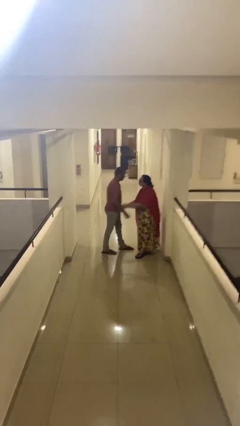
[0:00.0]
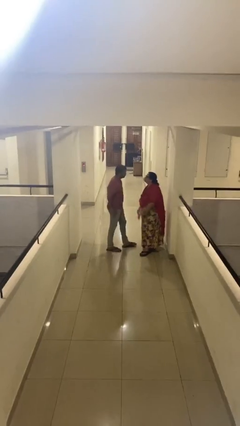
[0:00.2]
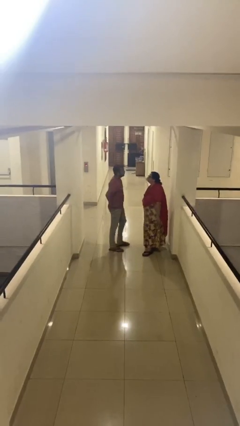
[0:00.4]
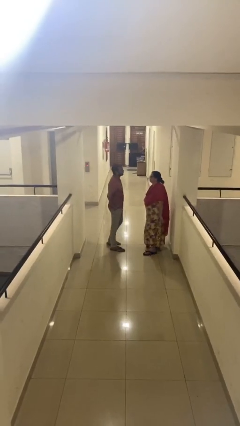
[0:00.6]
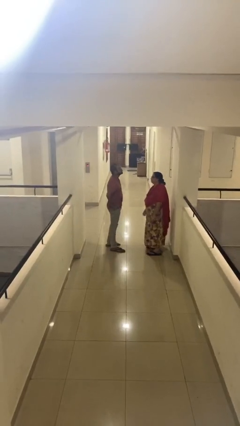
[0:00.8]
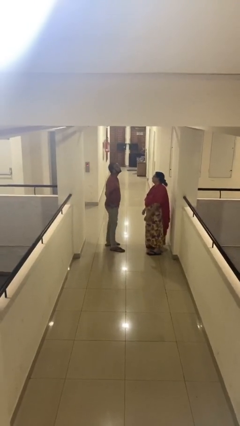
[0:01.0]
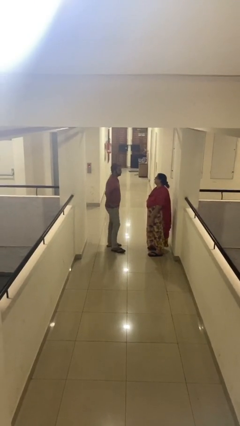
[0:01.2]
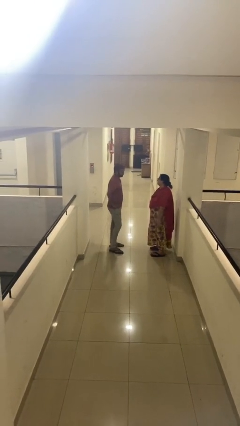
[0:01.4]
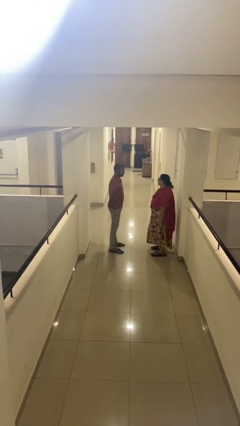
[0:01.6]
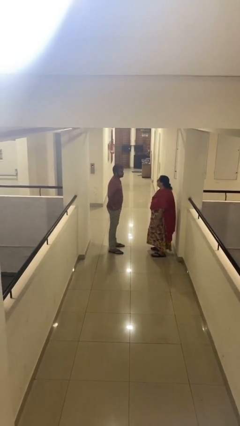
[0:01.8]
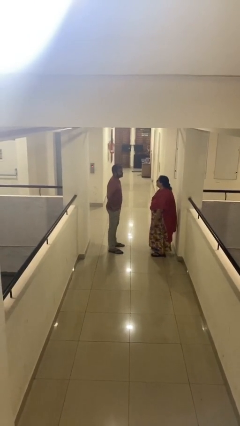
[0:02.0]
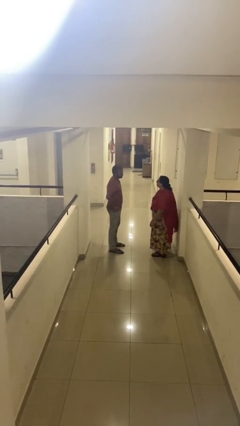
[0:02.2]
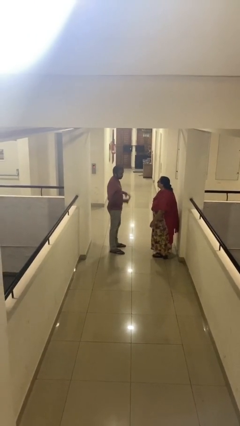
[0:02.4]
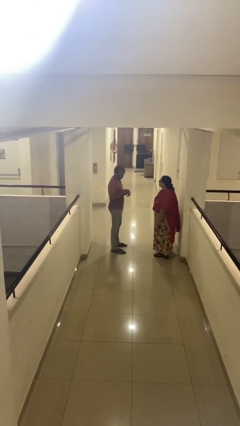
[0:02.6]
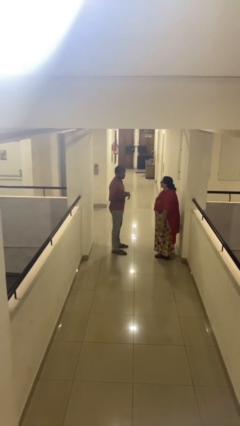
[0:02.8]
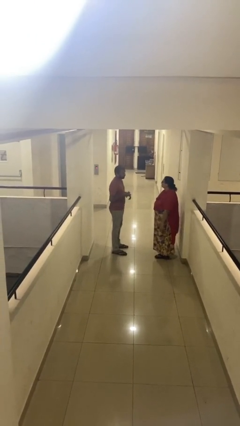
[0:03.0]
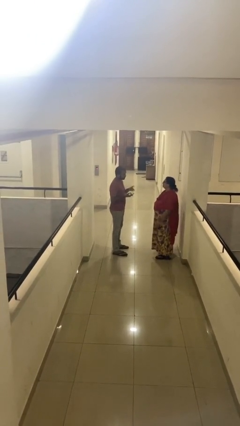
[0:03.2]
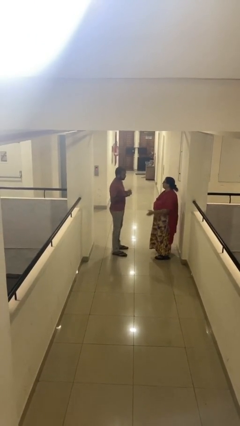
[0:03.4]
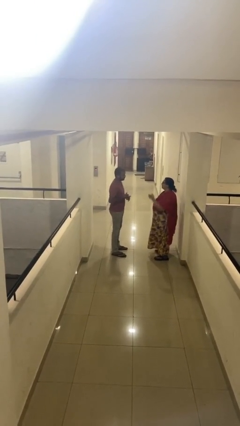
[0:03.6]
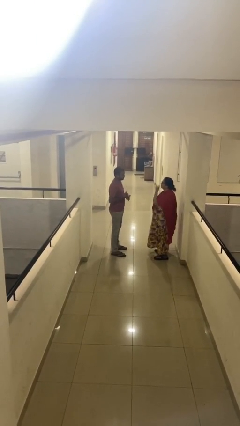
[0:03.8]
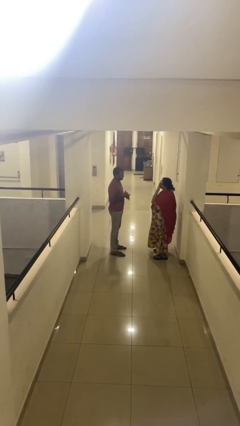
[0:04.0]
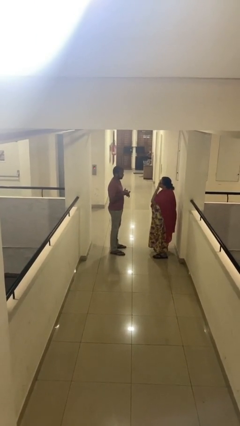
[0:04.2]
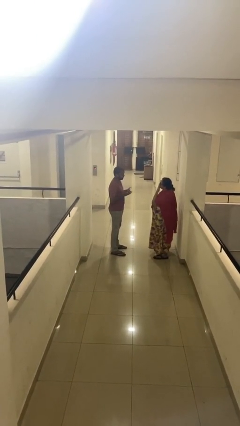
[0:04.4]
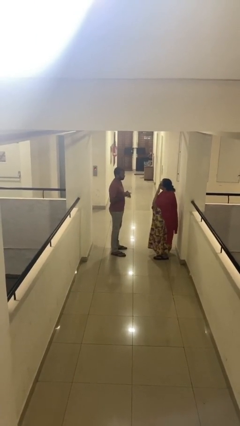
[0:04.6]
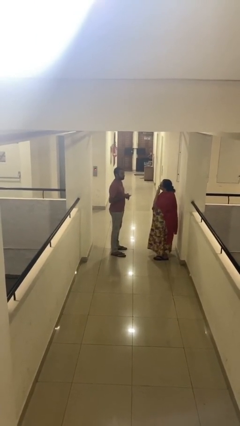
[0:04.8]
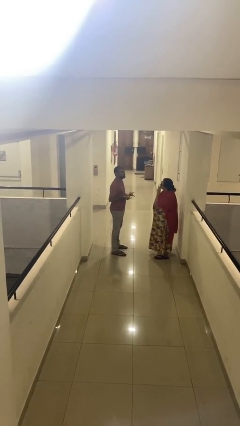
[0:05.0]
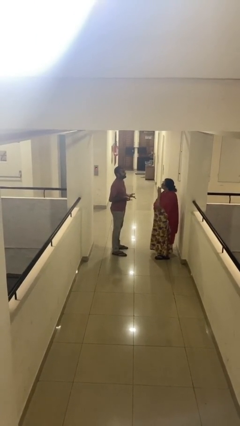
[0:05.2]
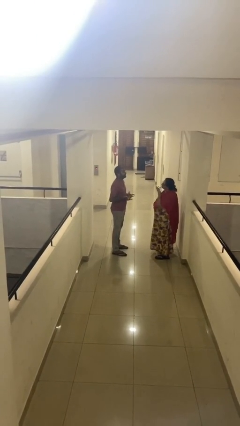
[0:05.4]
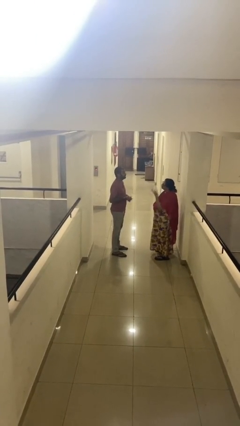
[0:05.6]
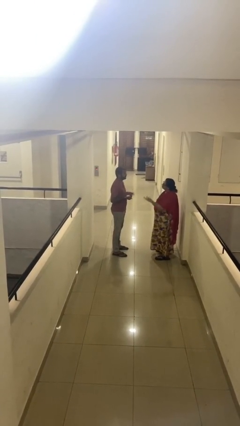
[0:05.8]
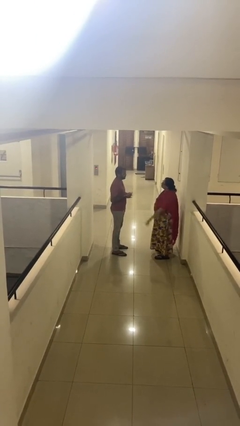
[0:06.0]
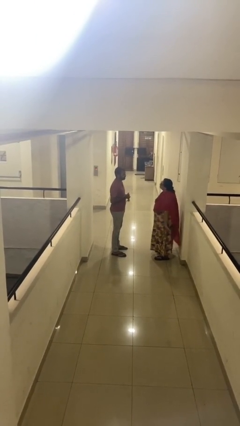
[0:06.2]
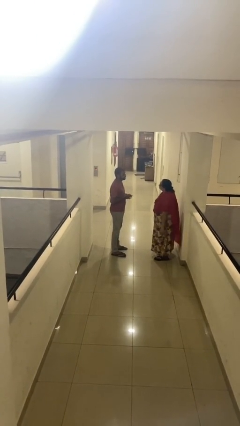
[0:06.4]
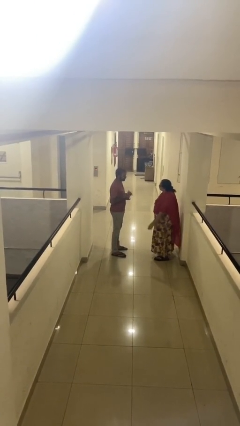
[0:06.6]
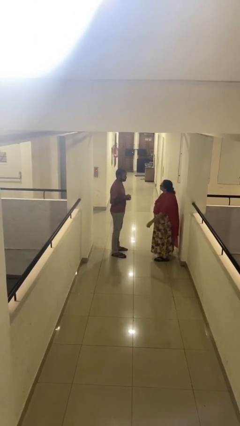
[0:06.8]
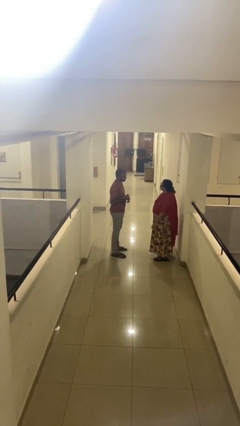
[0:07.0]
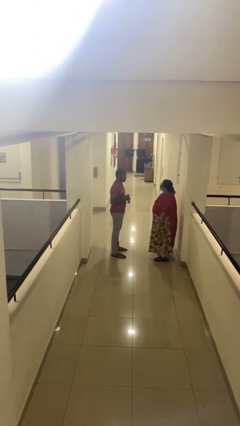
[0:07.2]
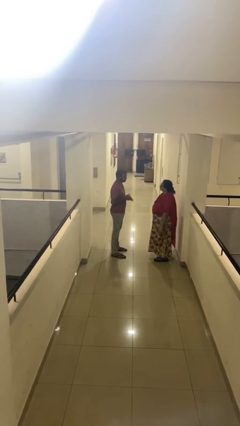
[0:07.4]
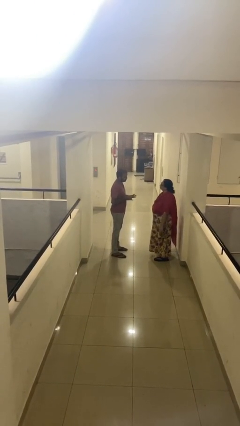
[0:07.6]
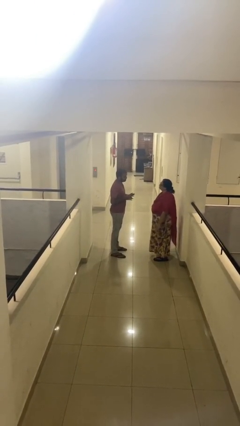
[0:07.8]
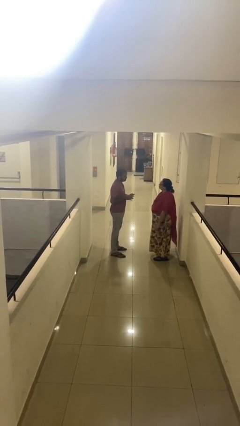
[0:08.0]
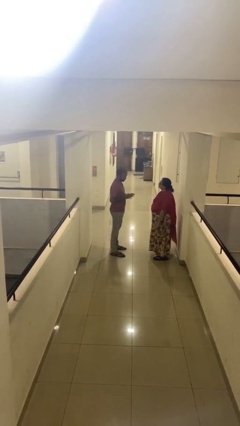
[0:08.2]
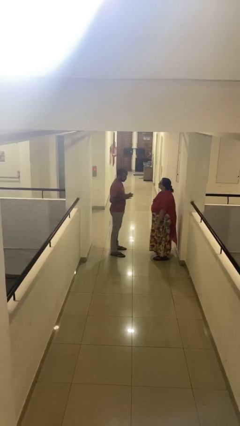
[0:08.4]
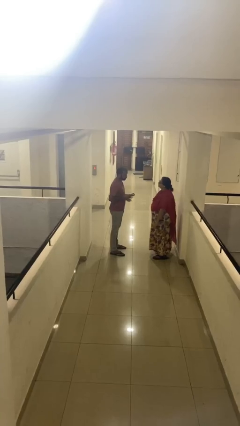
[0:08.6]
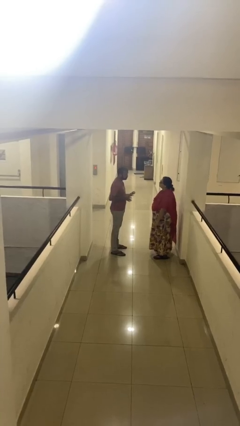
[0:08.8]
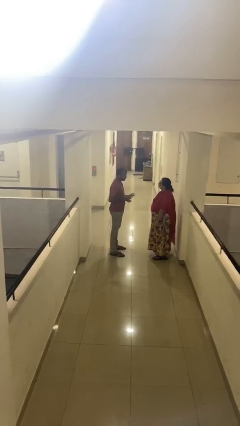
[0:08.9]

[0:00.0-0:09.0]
person talks to person

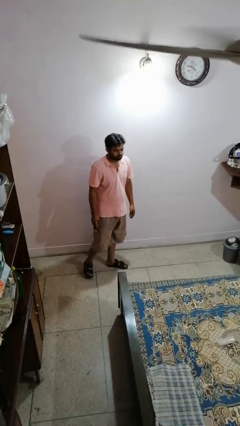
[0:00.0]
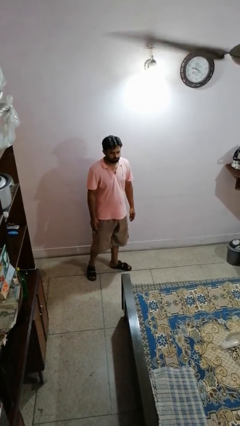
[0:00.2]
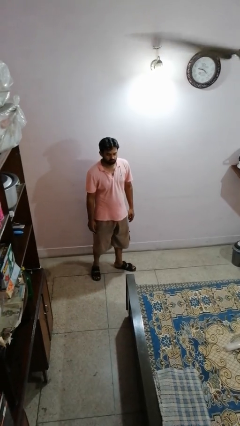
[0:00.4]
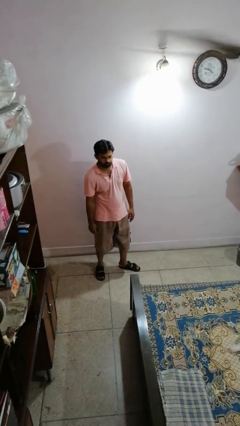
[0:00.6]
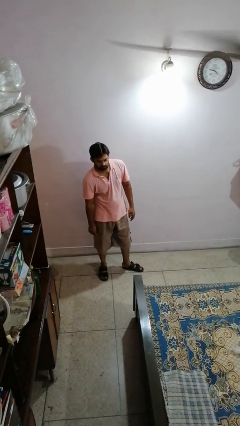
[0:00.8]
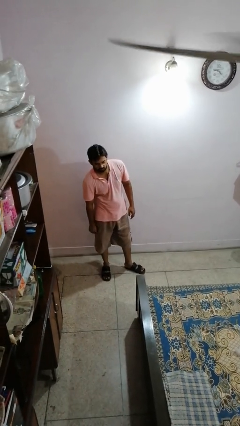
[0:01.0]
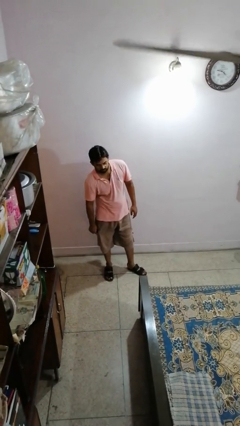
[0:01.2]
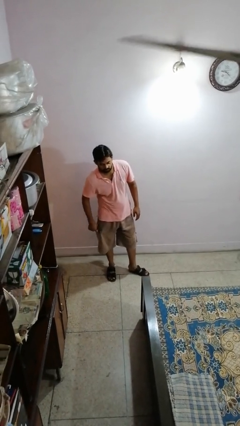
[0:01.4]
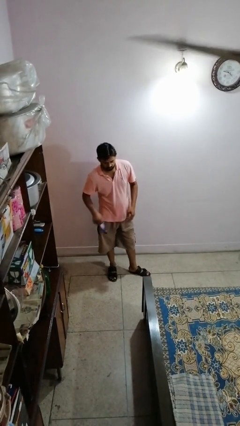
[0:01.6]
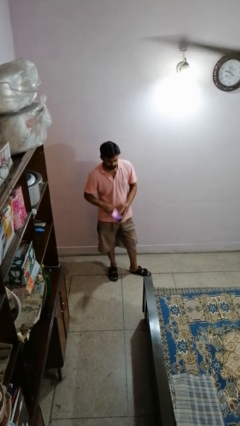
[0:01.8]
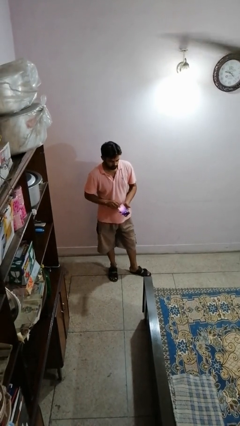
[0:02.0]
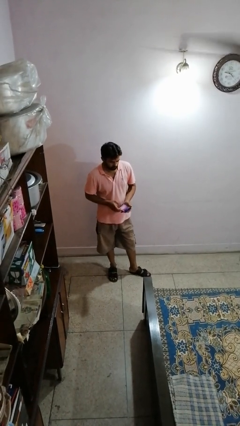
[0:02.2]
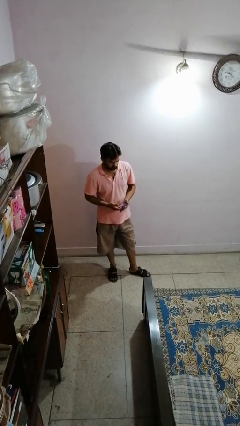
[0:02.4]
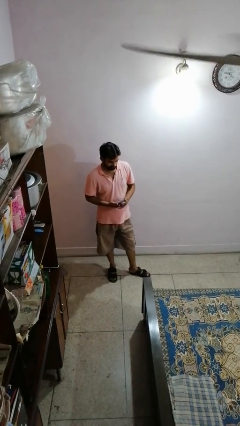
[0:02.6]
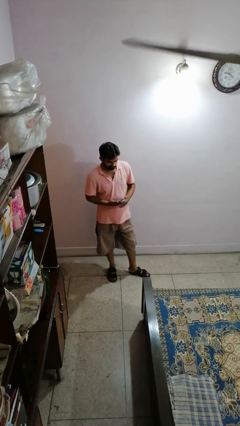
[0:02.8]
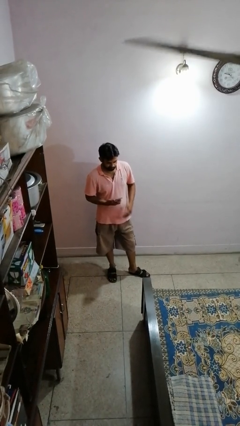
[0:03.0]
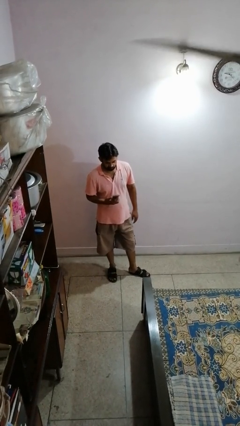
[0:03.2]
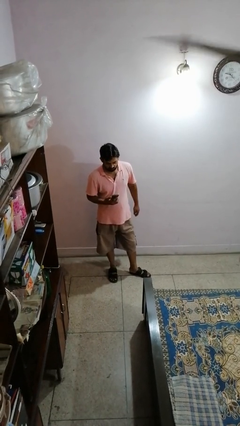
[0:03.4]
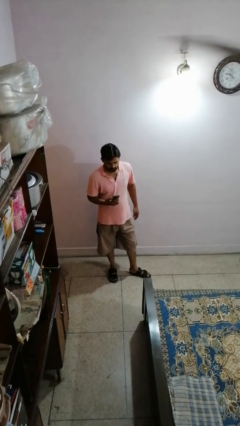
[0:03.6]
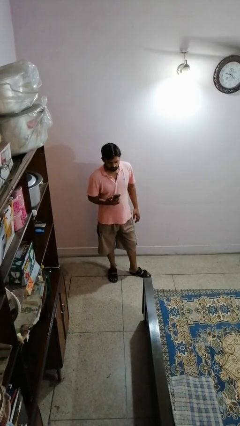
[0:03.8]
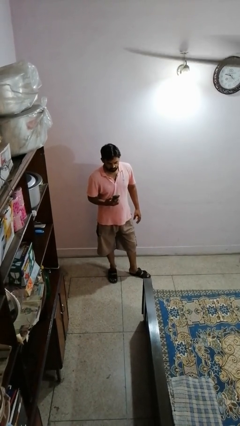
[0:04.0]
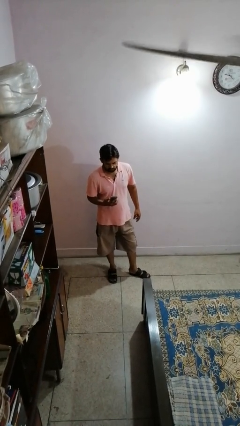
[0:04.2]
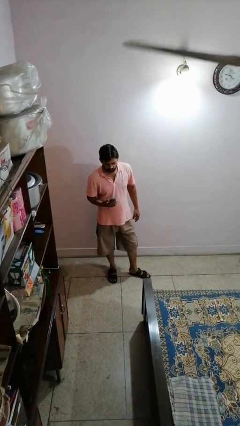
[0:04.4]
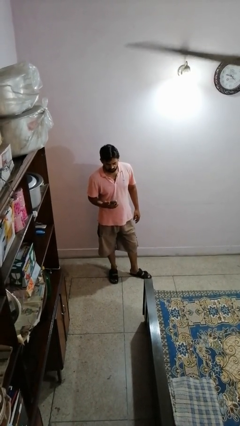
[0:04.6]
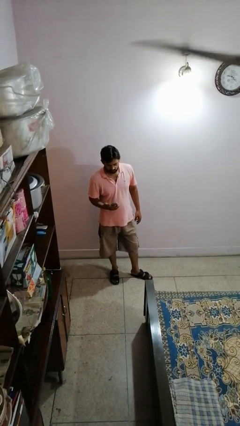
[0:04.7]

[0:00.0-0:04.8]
person takes phone from pocket

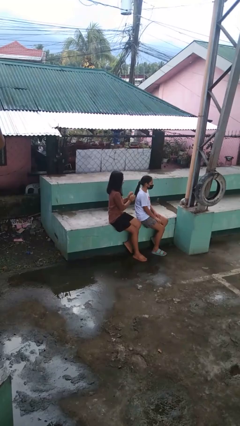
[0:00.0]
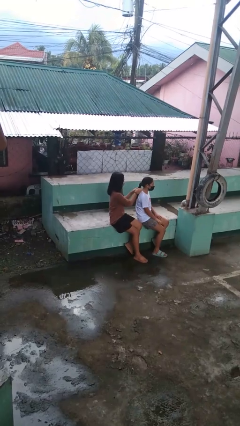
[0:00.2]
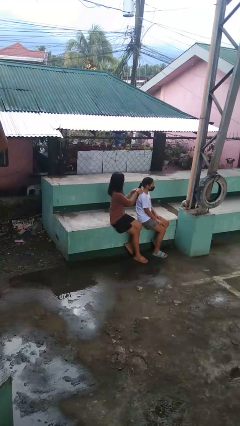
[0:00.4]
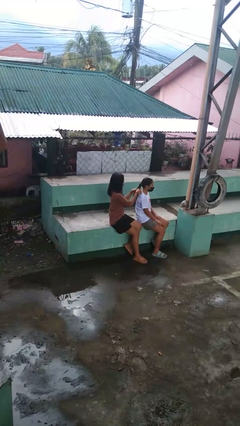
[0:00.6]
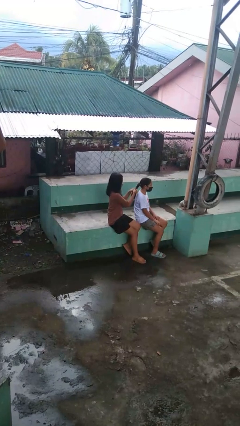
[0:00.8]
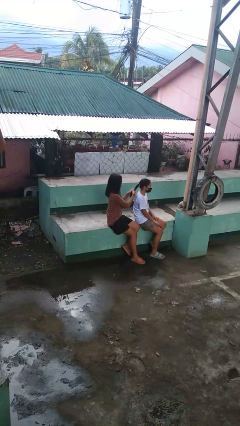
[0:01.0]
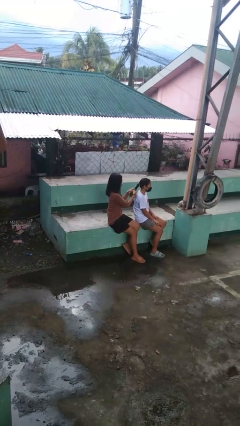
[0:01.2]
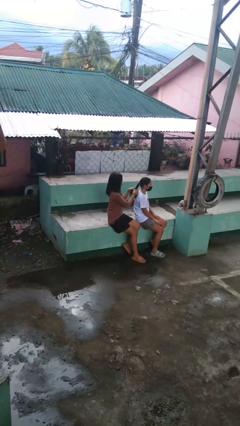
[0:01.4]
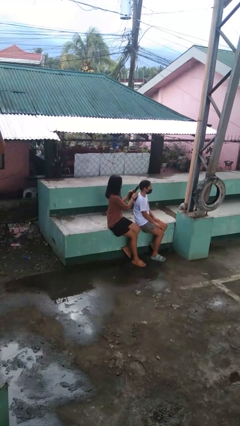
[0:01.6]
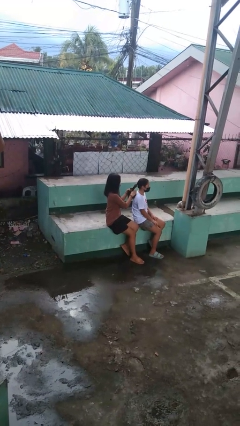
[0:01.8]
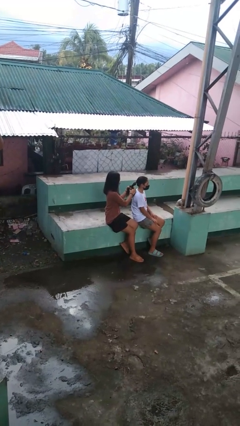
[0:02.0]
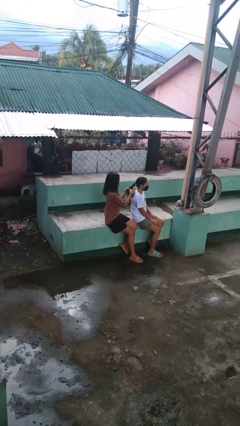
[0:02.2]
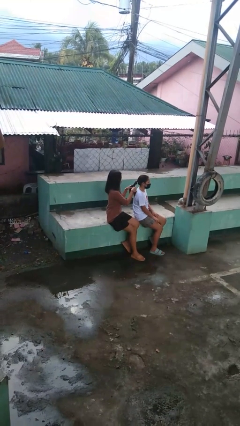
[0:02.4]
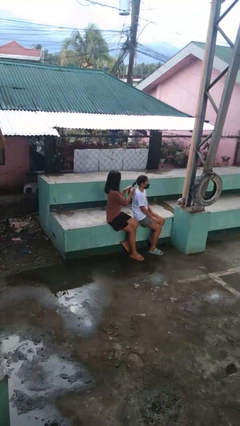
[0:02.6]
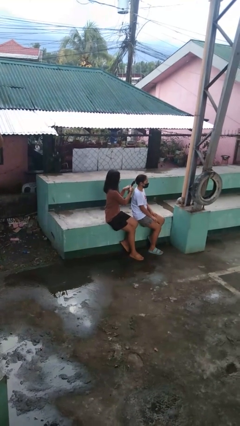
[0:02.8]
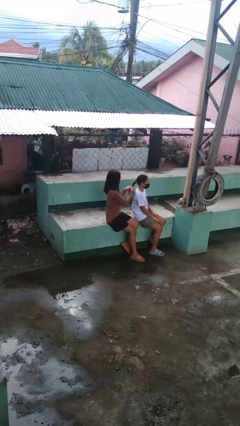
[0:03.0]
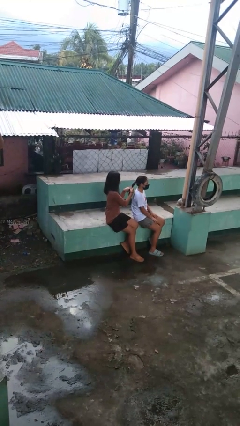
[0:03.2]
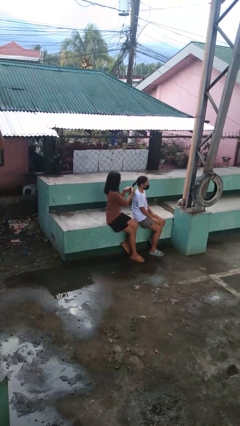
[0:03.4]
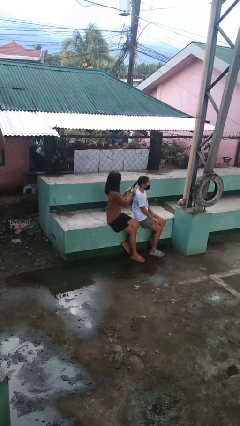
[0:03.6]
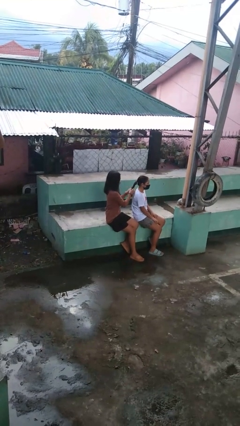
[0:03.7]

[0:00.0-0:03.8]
person braids hair of person

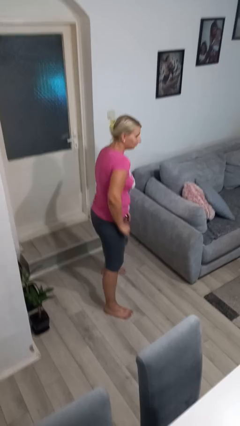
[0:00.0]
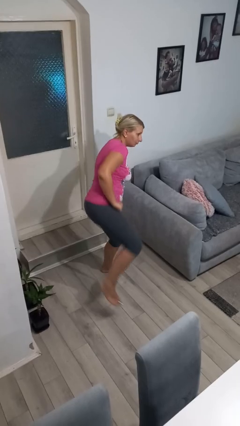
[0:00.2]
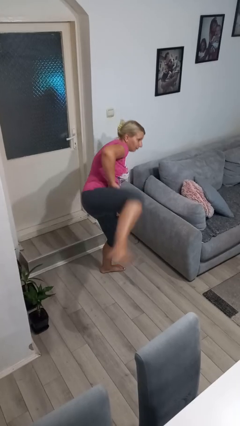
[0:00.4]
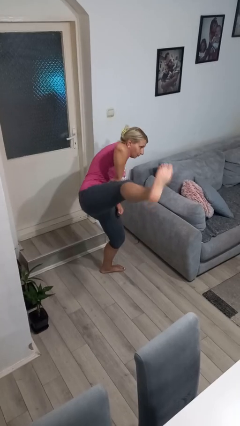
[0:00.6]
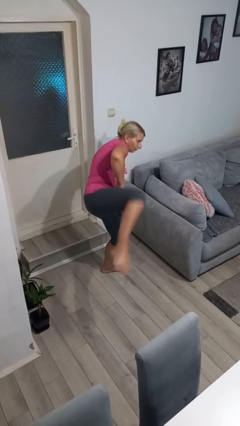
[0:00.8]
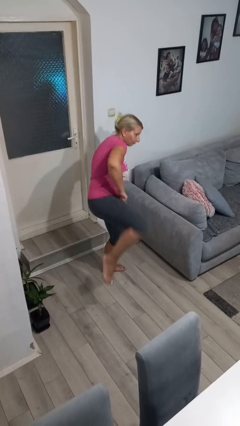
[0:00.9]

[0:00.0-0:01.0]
person karate kicks
